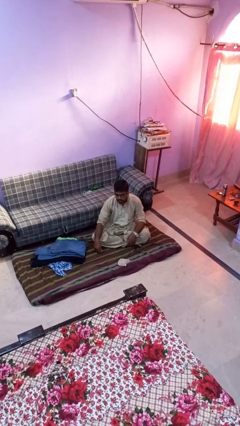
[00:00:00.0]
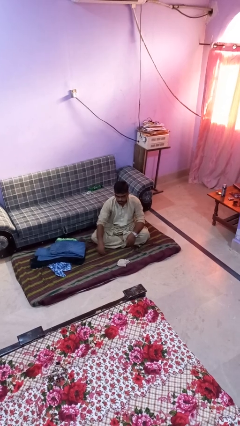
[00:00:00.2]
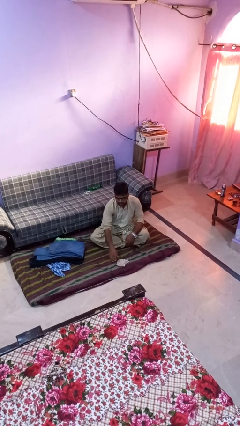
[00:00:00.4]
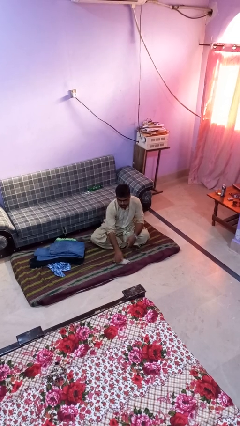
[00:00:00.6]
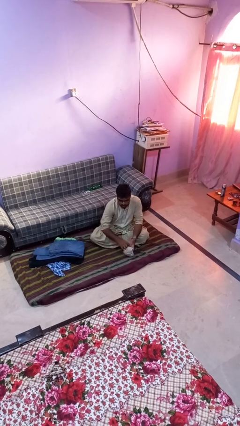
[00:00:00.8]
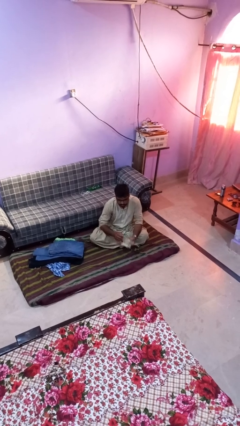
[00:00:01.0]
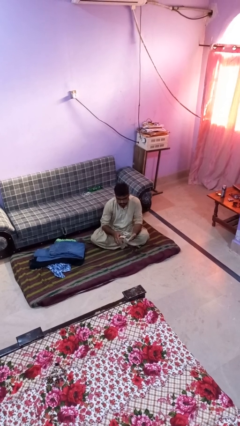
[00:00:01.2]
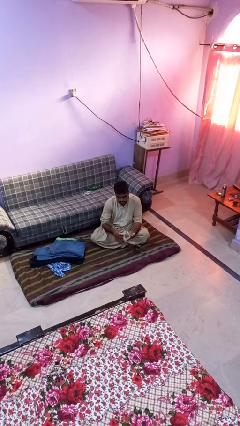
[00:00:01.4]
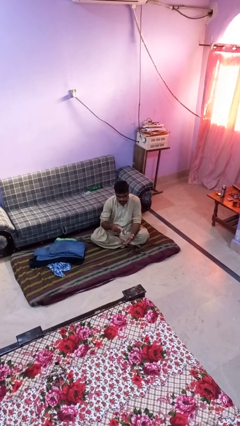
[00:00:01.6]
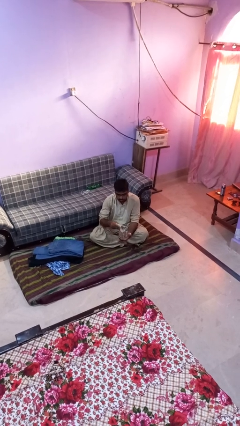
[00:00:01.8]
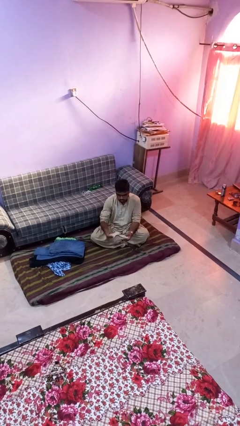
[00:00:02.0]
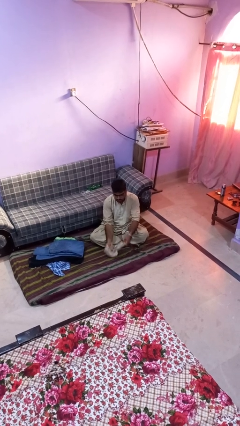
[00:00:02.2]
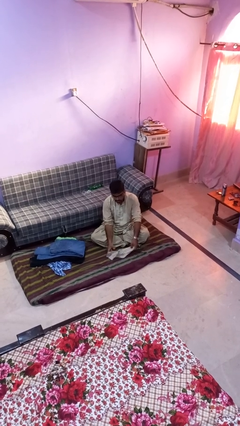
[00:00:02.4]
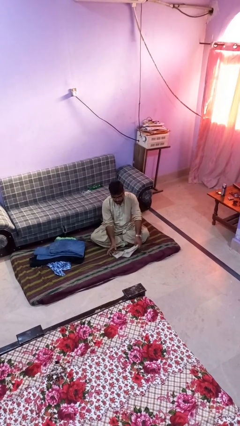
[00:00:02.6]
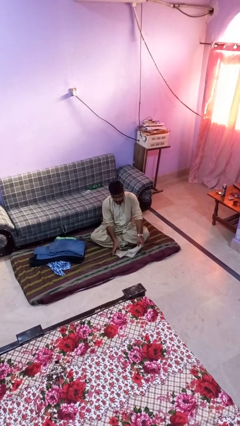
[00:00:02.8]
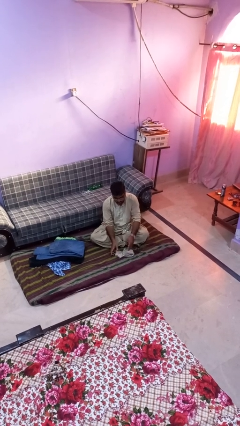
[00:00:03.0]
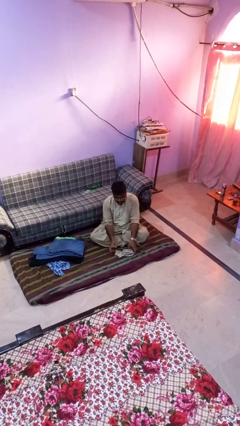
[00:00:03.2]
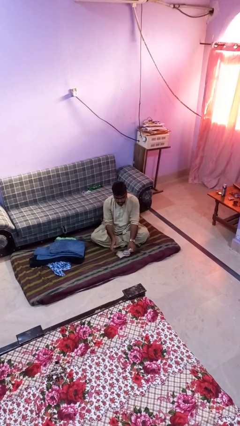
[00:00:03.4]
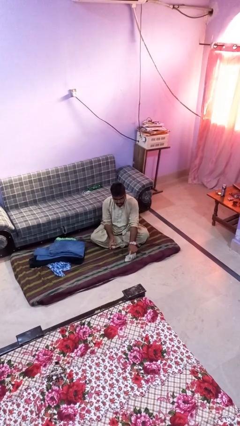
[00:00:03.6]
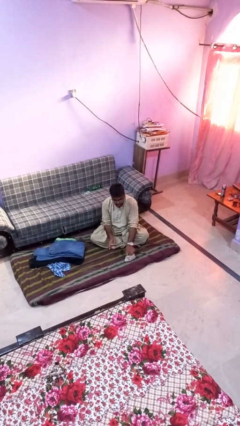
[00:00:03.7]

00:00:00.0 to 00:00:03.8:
person folds socks

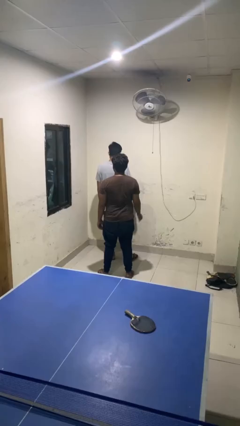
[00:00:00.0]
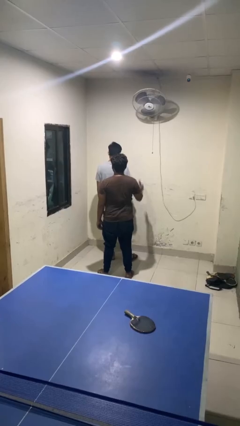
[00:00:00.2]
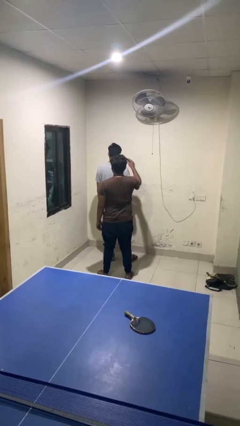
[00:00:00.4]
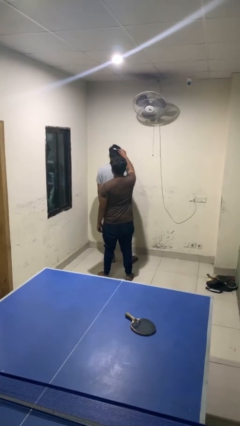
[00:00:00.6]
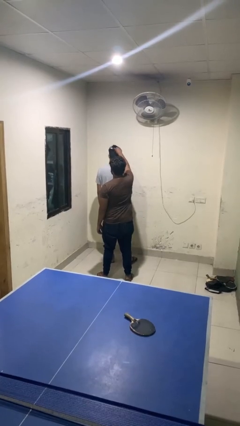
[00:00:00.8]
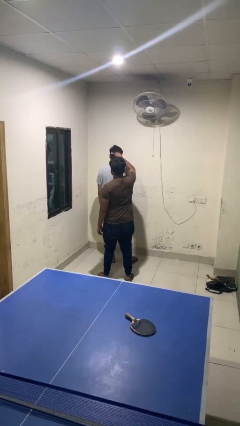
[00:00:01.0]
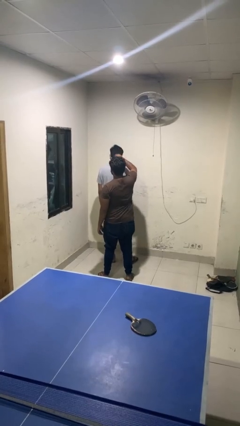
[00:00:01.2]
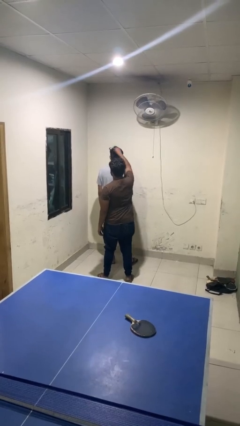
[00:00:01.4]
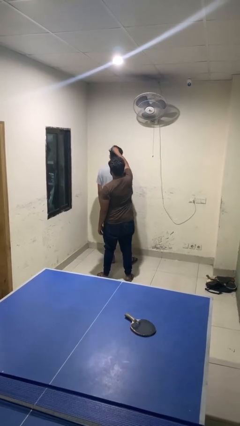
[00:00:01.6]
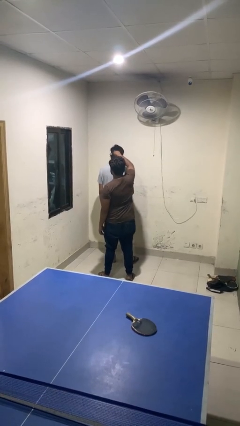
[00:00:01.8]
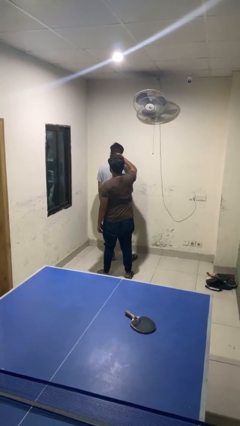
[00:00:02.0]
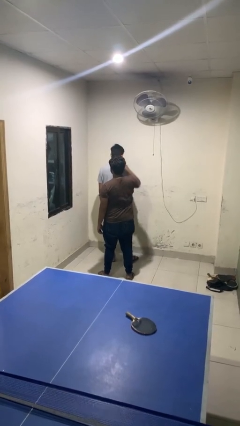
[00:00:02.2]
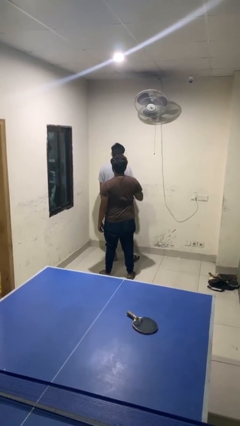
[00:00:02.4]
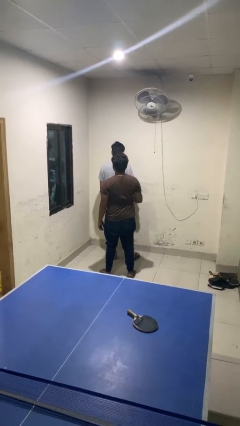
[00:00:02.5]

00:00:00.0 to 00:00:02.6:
person brushes hair of person

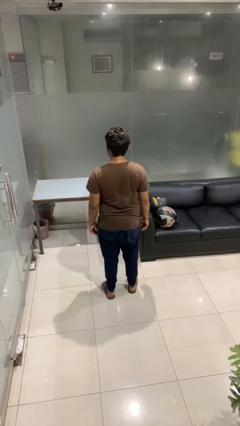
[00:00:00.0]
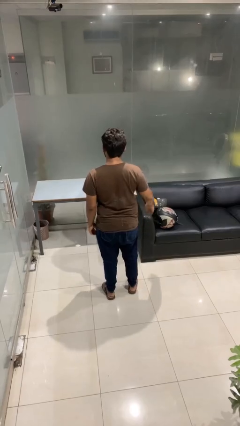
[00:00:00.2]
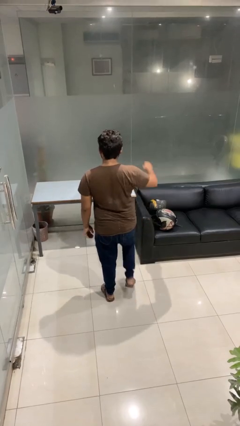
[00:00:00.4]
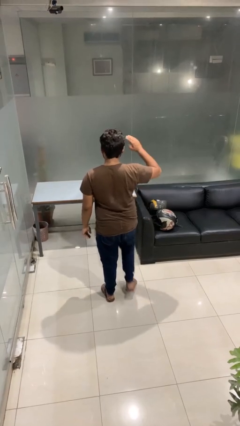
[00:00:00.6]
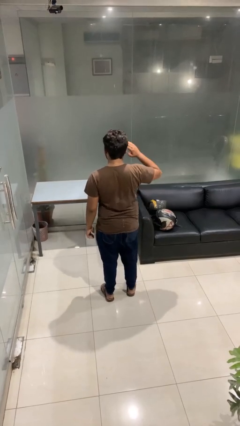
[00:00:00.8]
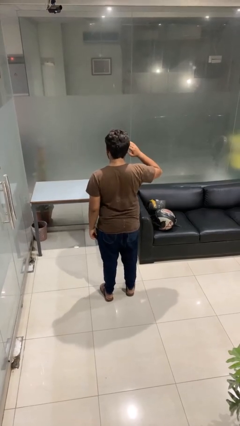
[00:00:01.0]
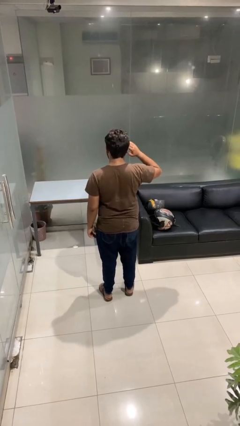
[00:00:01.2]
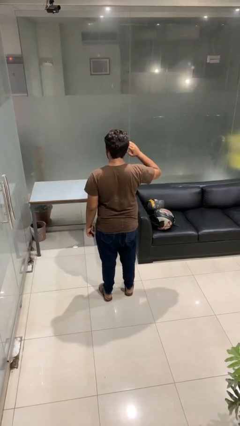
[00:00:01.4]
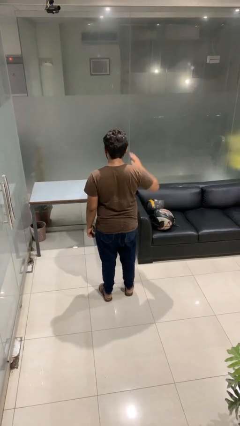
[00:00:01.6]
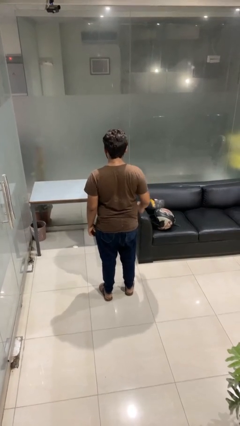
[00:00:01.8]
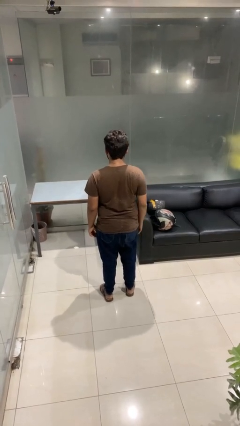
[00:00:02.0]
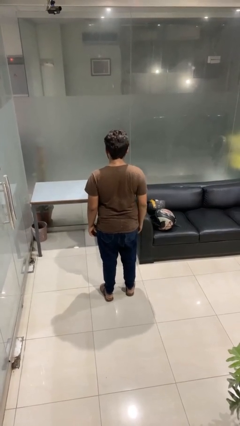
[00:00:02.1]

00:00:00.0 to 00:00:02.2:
person salutes

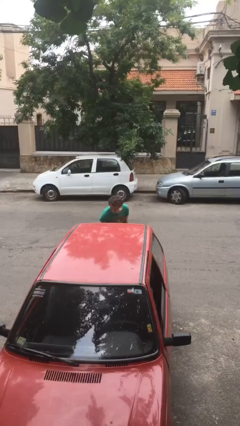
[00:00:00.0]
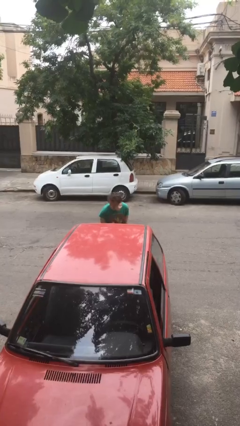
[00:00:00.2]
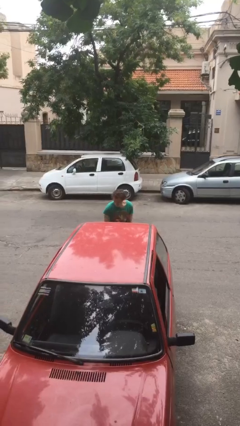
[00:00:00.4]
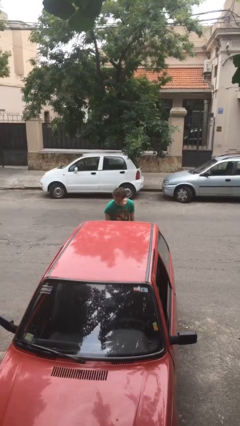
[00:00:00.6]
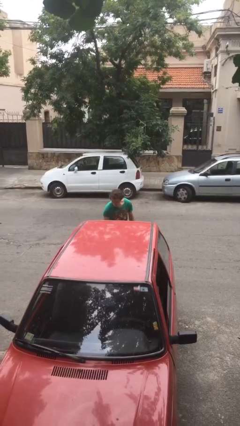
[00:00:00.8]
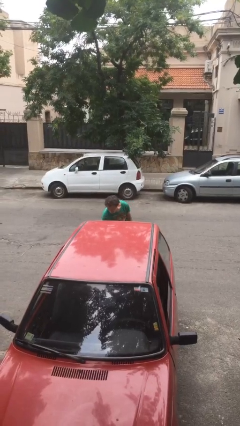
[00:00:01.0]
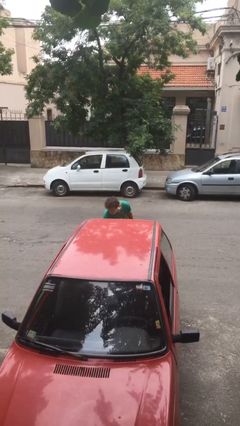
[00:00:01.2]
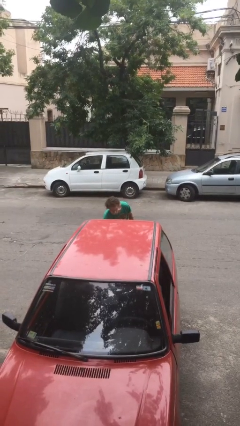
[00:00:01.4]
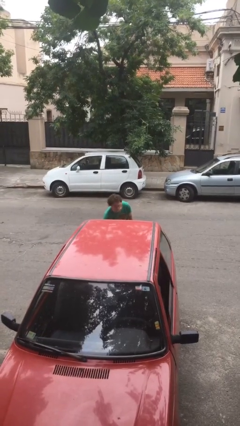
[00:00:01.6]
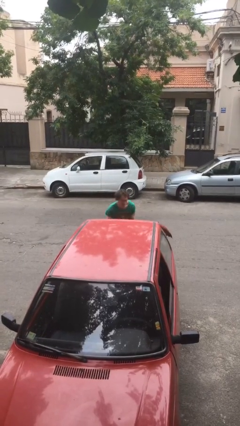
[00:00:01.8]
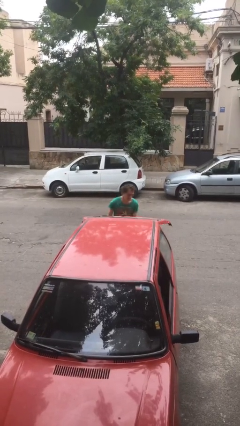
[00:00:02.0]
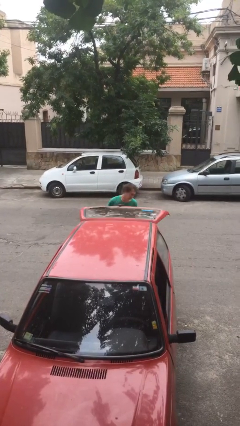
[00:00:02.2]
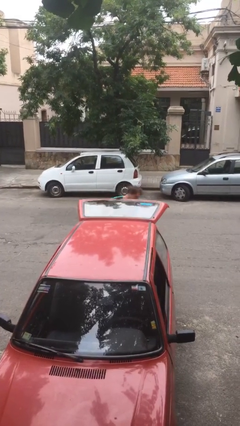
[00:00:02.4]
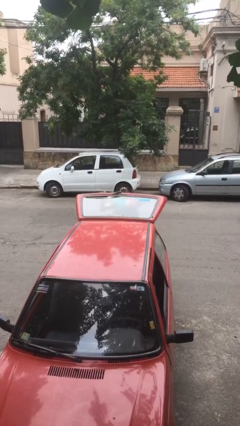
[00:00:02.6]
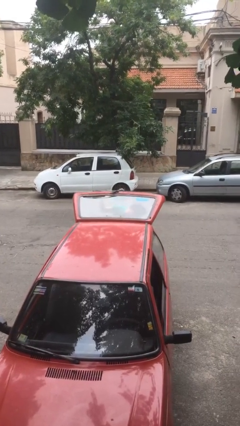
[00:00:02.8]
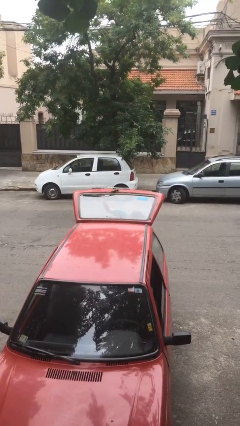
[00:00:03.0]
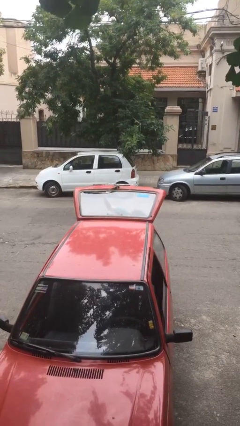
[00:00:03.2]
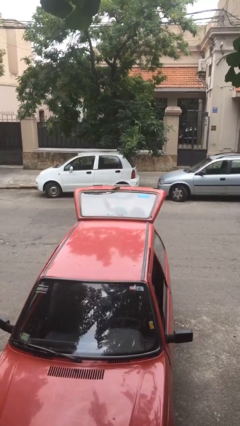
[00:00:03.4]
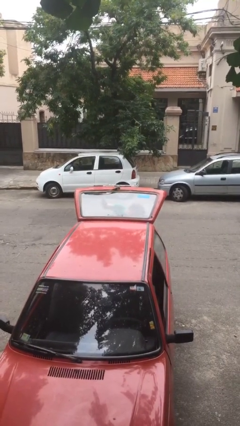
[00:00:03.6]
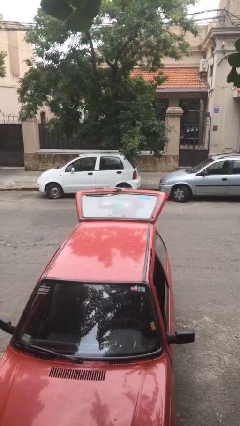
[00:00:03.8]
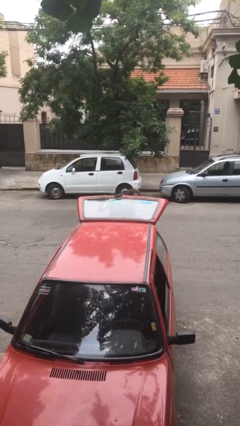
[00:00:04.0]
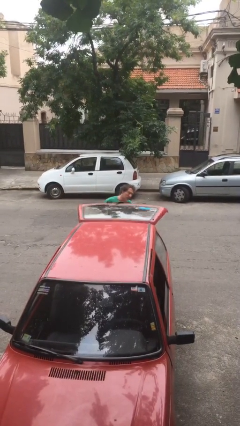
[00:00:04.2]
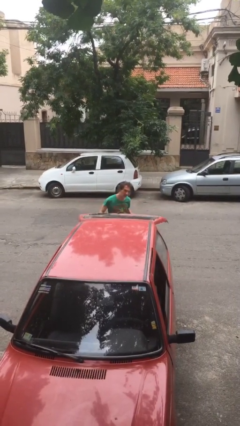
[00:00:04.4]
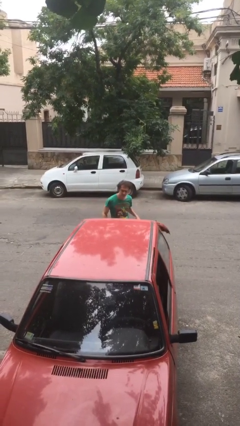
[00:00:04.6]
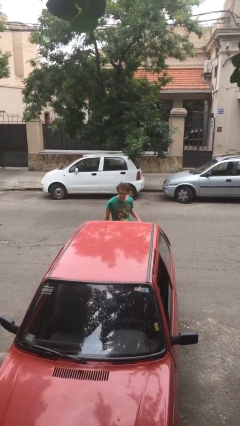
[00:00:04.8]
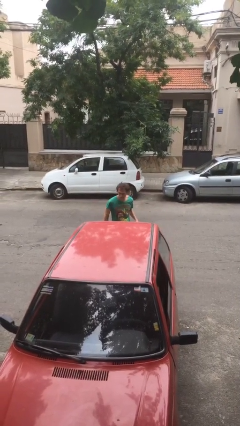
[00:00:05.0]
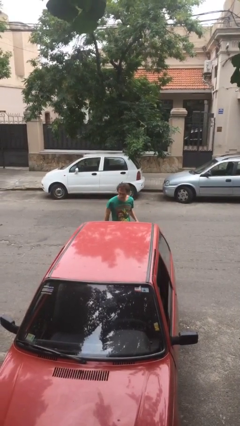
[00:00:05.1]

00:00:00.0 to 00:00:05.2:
person unloads car

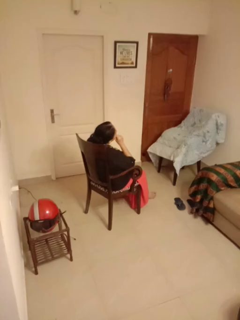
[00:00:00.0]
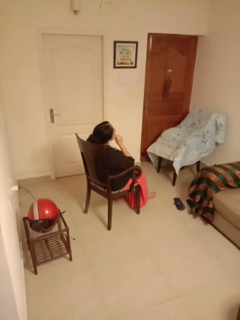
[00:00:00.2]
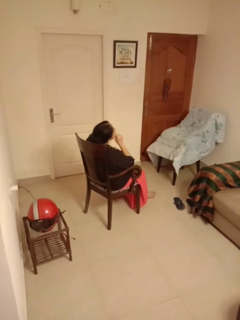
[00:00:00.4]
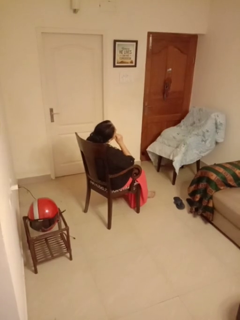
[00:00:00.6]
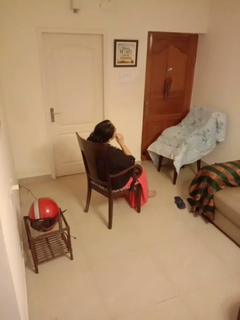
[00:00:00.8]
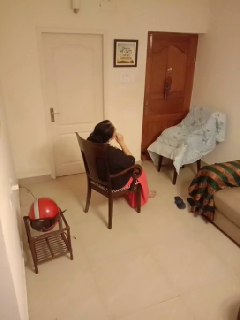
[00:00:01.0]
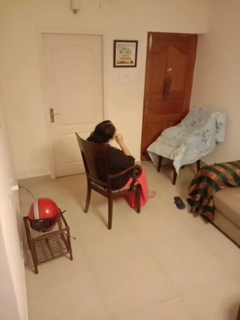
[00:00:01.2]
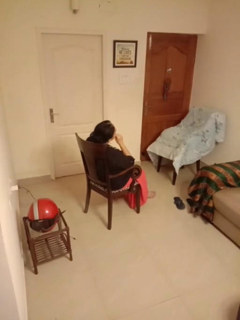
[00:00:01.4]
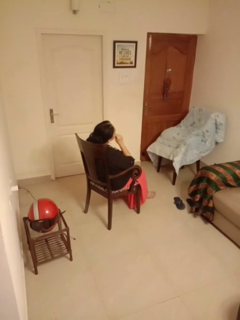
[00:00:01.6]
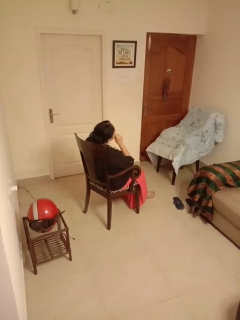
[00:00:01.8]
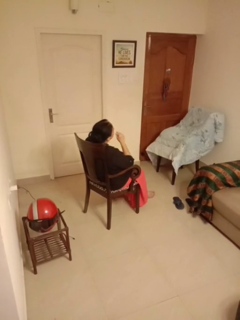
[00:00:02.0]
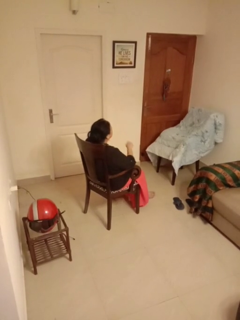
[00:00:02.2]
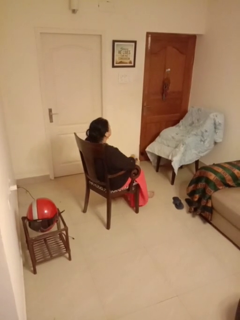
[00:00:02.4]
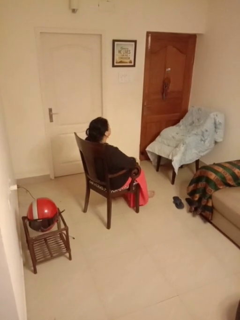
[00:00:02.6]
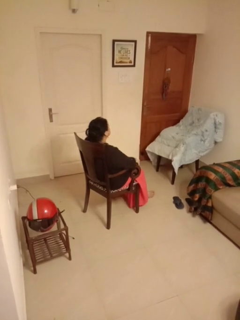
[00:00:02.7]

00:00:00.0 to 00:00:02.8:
person strokes chin

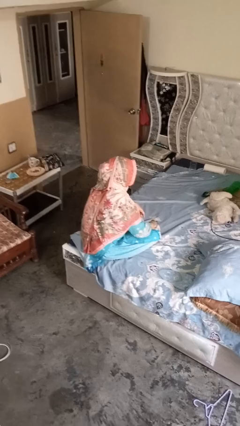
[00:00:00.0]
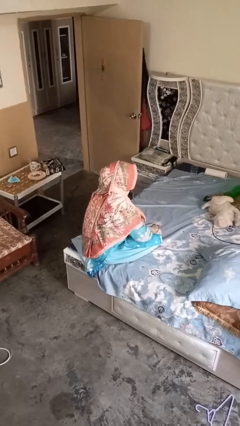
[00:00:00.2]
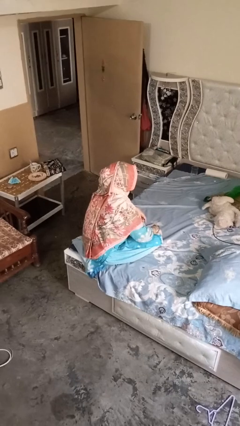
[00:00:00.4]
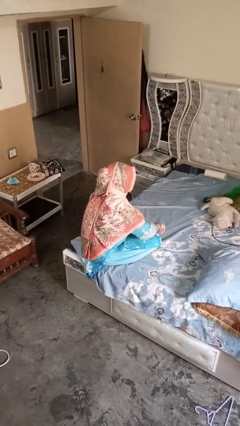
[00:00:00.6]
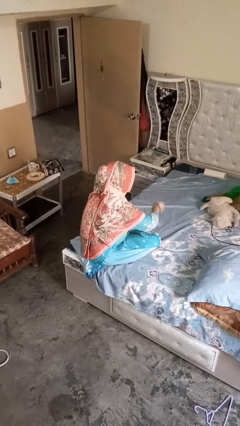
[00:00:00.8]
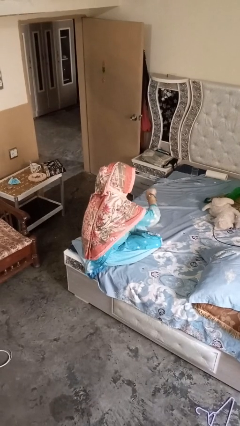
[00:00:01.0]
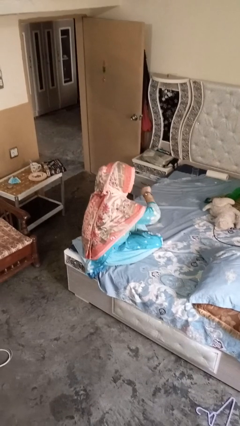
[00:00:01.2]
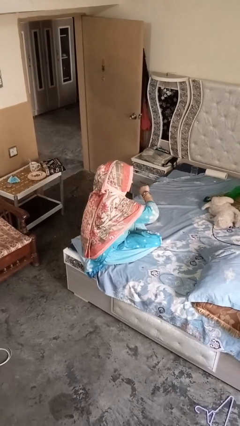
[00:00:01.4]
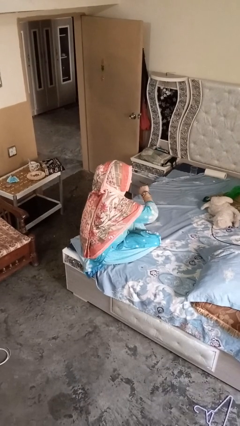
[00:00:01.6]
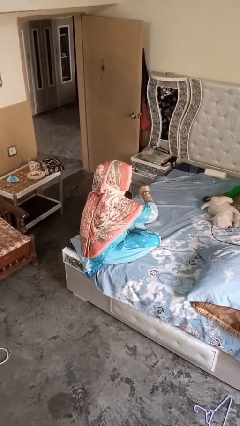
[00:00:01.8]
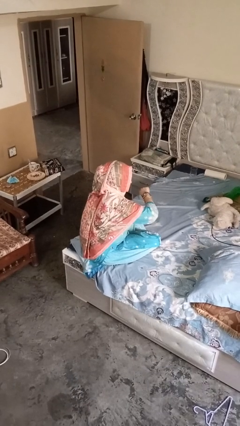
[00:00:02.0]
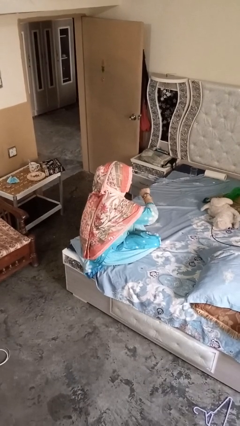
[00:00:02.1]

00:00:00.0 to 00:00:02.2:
person gestures watch closely
